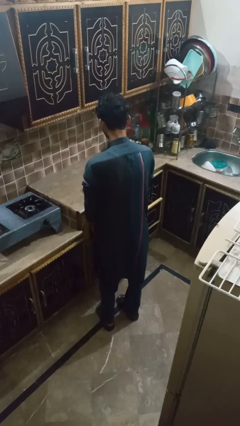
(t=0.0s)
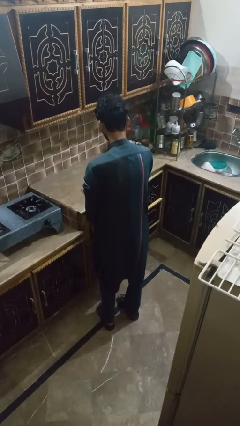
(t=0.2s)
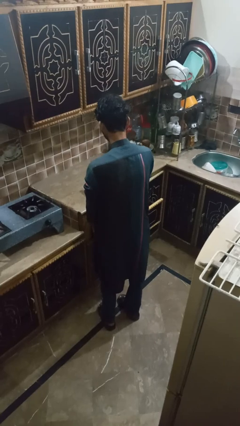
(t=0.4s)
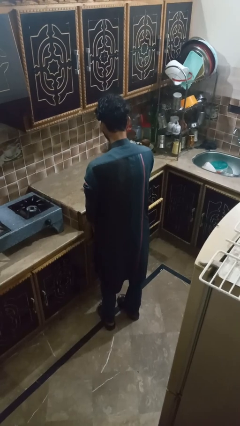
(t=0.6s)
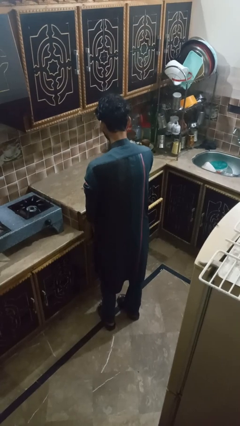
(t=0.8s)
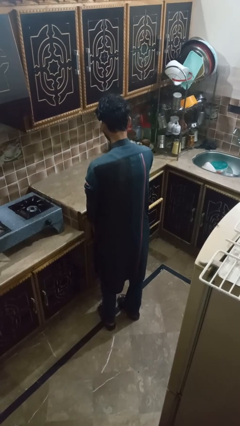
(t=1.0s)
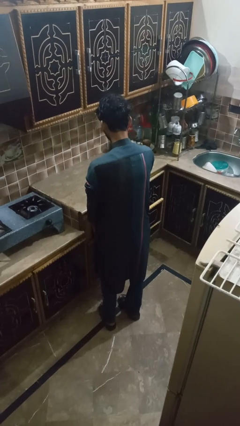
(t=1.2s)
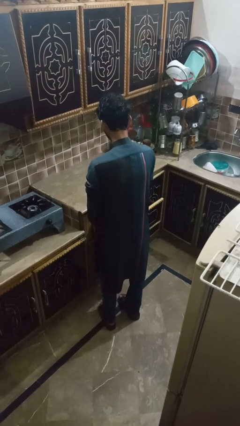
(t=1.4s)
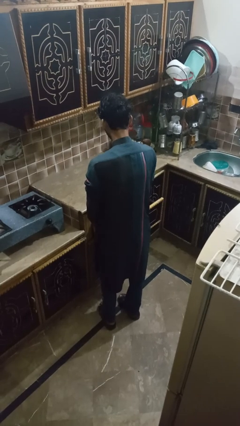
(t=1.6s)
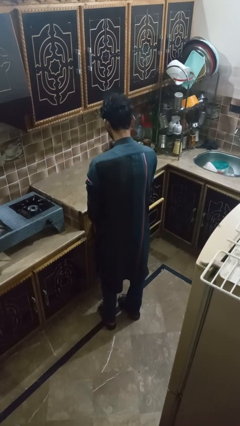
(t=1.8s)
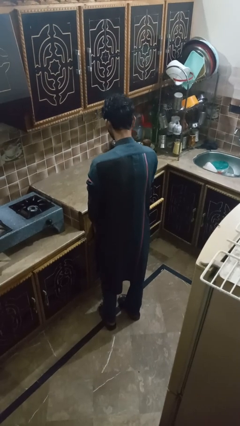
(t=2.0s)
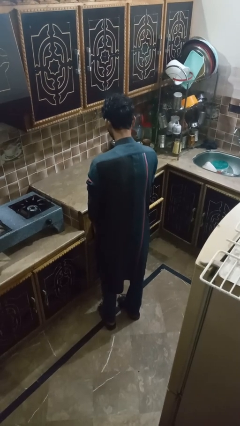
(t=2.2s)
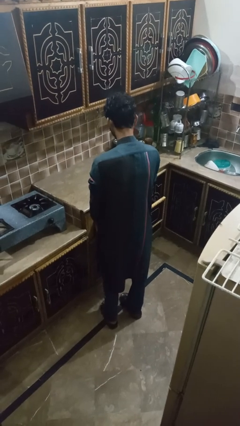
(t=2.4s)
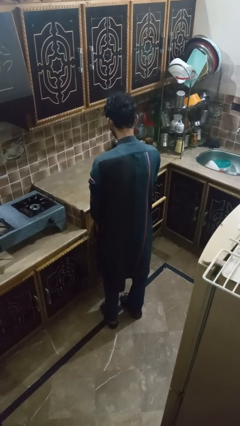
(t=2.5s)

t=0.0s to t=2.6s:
person puts object into kitchen drawer

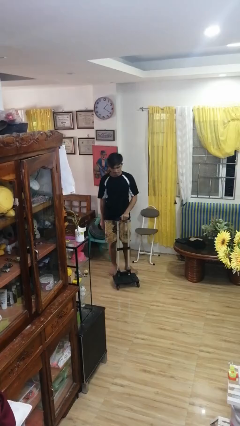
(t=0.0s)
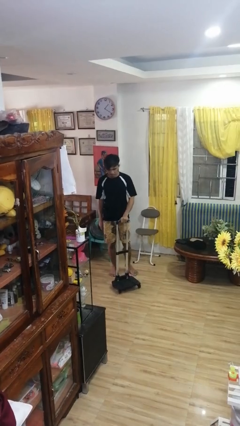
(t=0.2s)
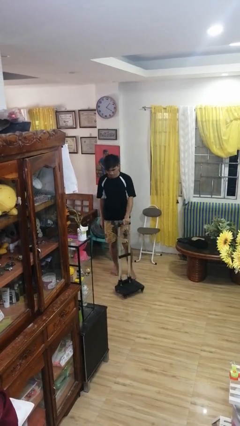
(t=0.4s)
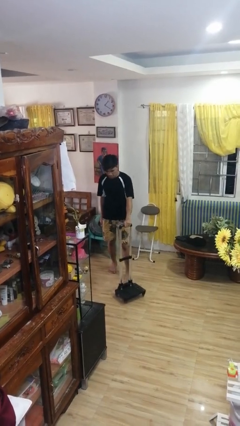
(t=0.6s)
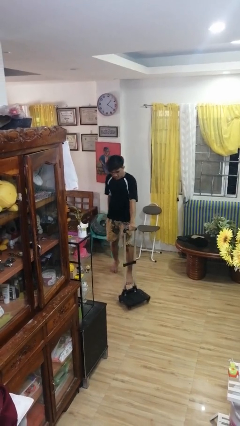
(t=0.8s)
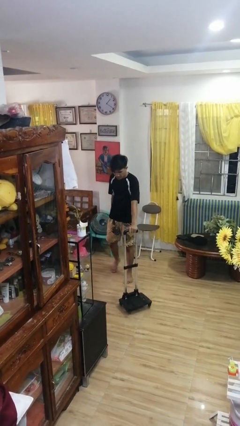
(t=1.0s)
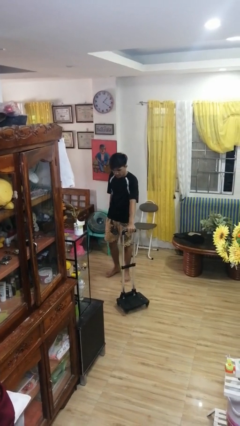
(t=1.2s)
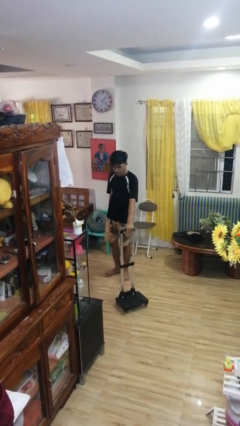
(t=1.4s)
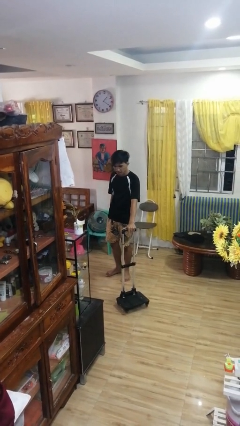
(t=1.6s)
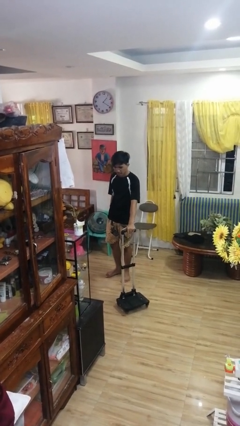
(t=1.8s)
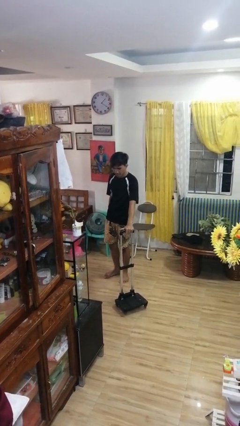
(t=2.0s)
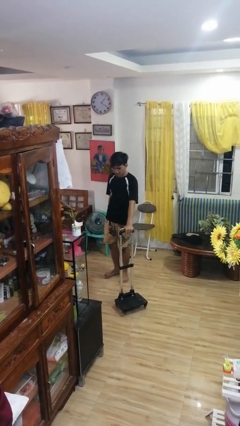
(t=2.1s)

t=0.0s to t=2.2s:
person pushes wheeled cart

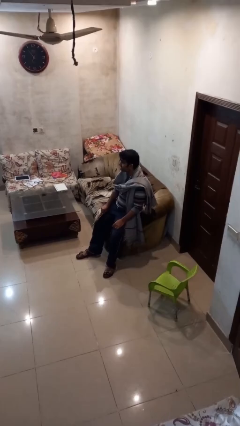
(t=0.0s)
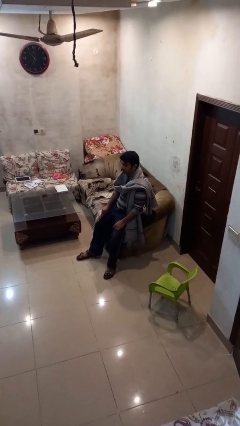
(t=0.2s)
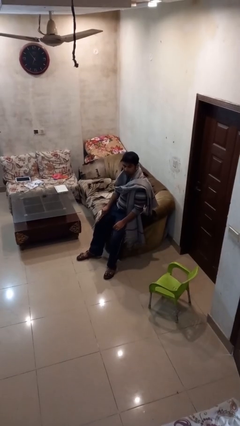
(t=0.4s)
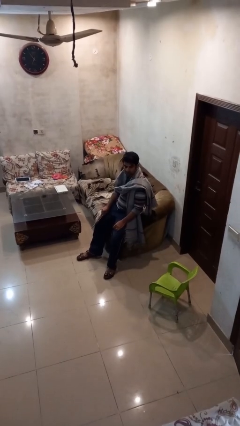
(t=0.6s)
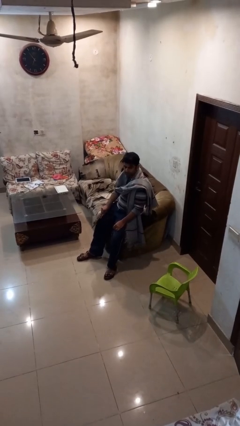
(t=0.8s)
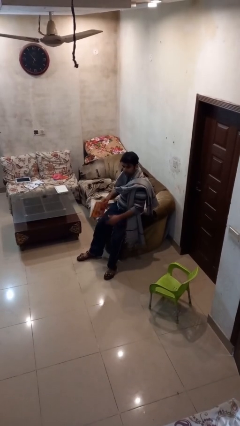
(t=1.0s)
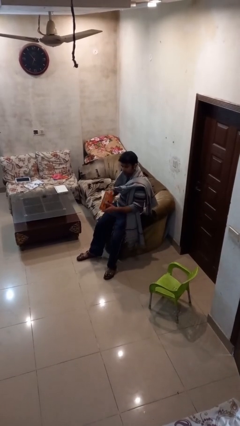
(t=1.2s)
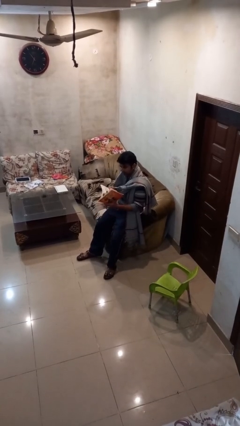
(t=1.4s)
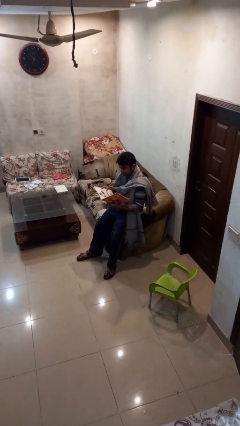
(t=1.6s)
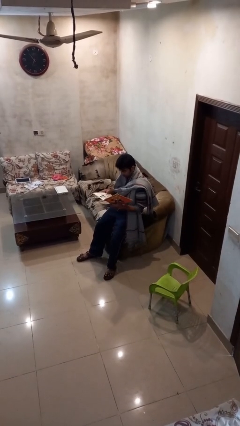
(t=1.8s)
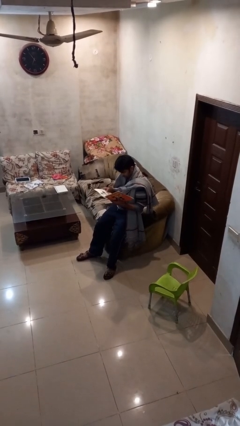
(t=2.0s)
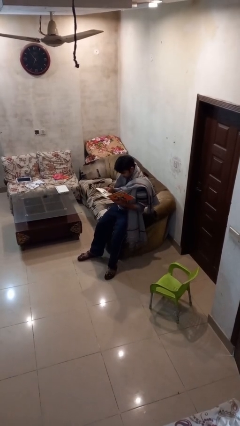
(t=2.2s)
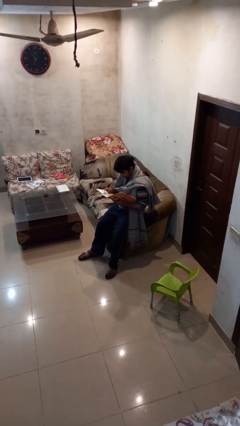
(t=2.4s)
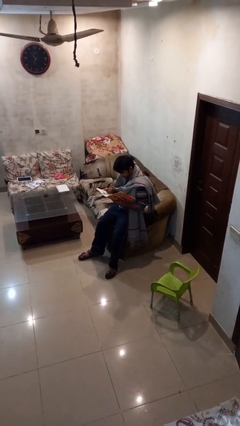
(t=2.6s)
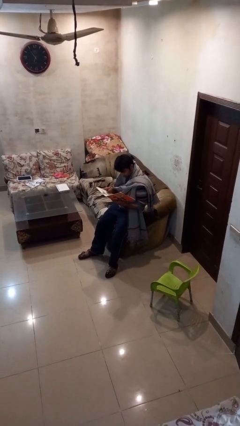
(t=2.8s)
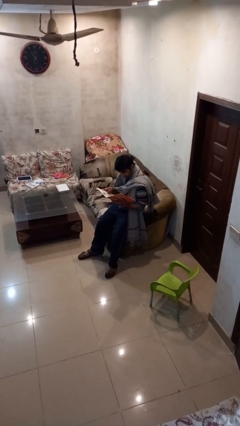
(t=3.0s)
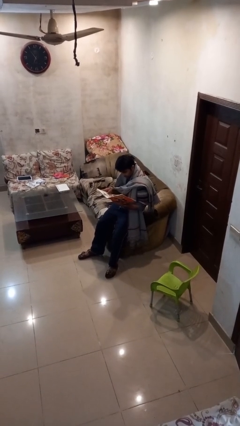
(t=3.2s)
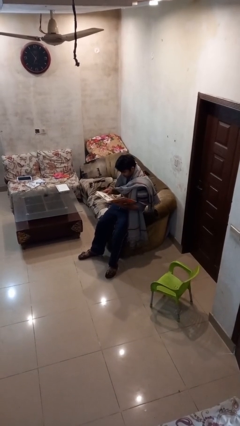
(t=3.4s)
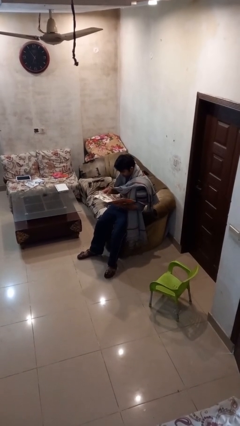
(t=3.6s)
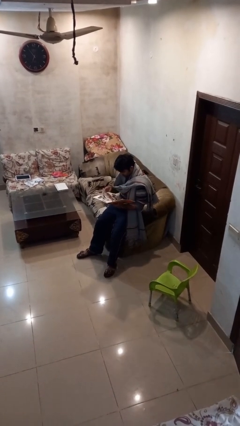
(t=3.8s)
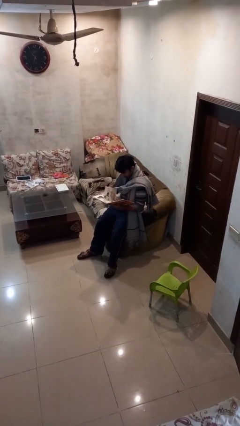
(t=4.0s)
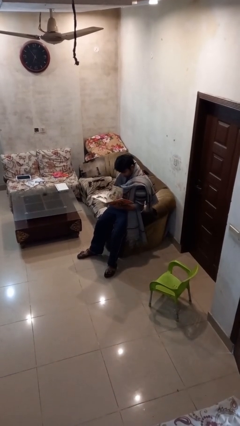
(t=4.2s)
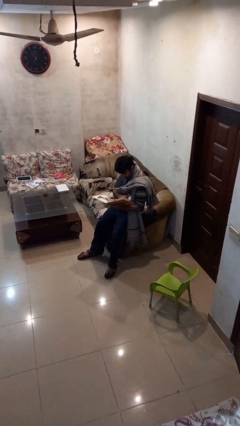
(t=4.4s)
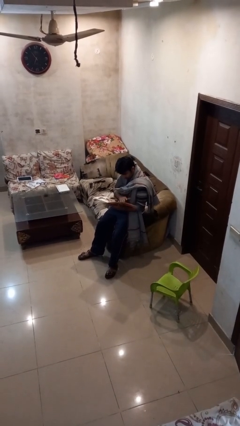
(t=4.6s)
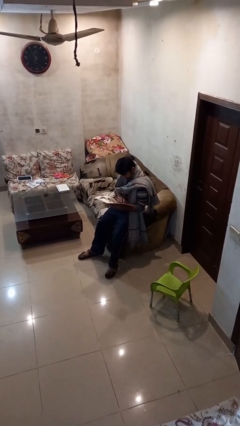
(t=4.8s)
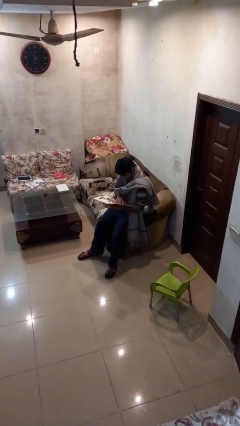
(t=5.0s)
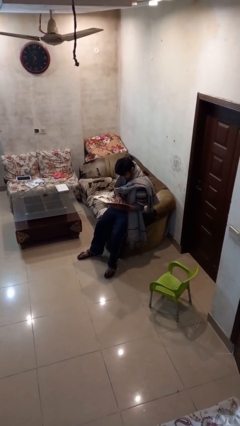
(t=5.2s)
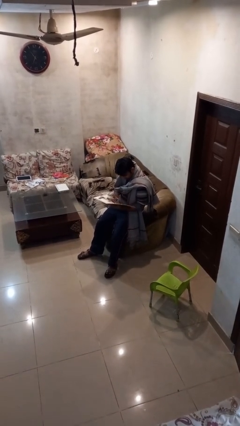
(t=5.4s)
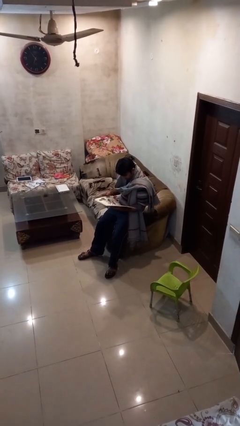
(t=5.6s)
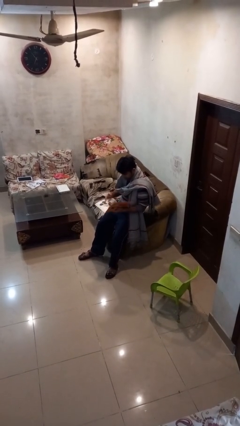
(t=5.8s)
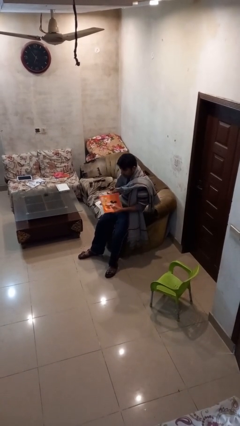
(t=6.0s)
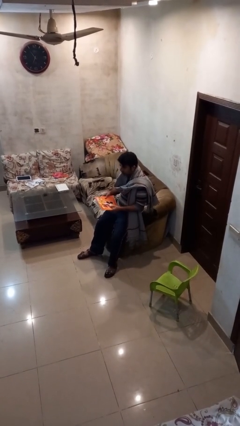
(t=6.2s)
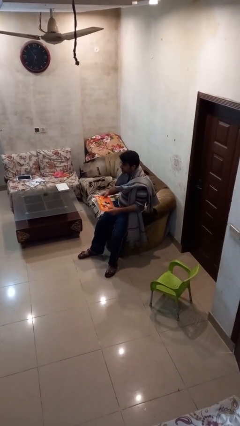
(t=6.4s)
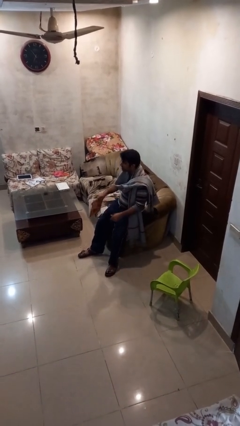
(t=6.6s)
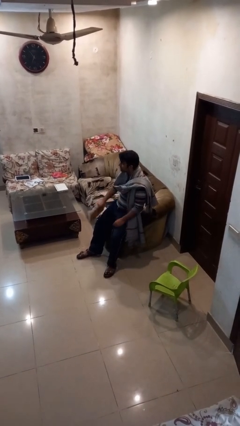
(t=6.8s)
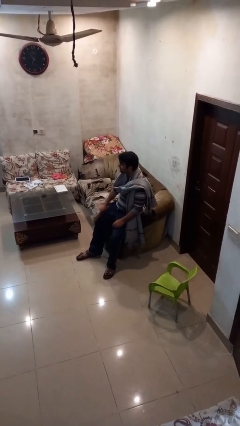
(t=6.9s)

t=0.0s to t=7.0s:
person reads document

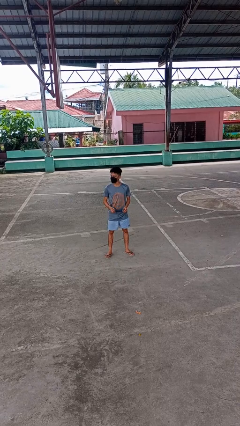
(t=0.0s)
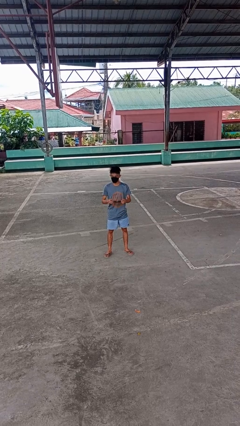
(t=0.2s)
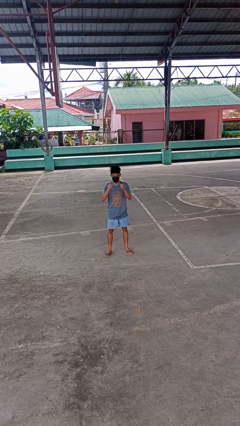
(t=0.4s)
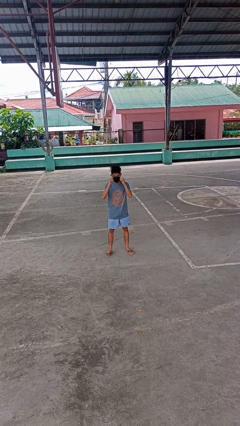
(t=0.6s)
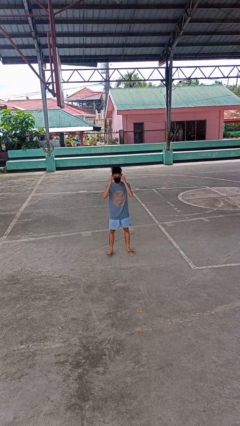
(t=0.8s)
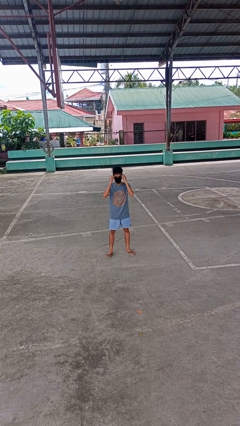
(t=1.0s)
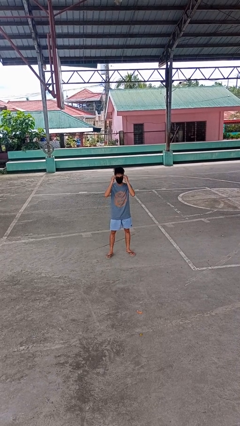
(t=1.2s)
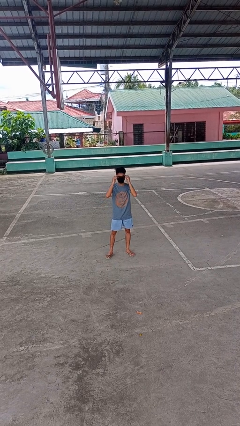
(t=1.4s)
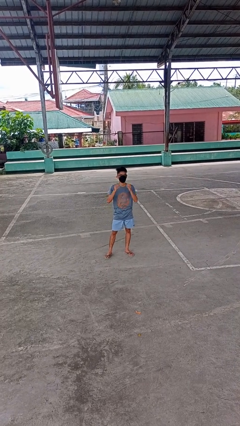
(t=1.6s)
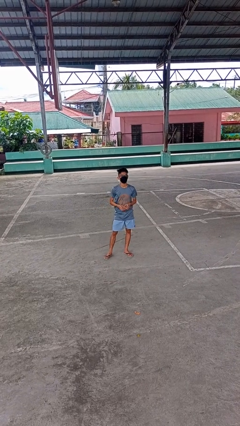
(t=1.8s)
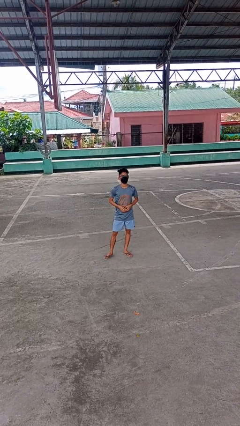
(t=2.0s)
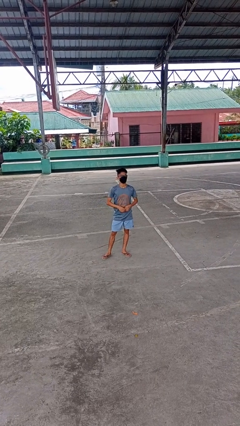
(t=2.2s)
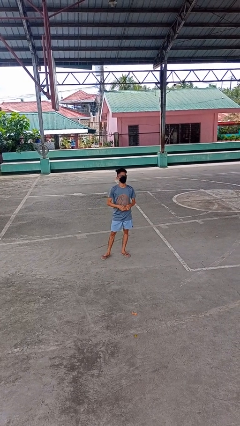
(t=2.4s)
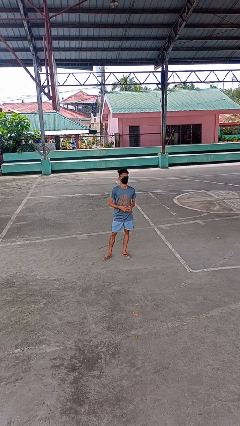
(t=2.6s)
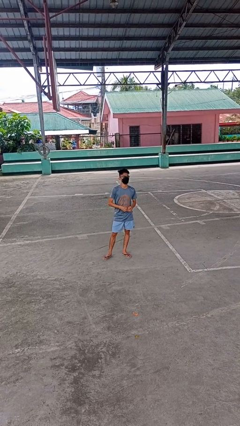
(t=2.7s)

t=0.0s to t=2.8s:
person puts on glasses

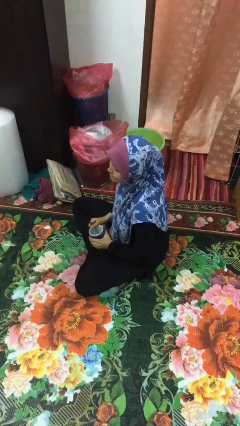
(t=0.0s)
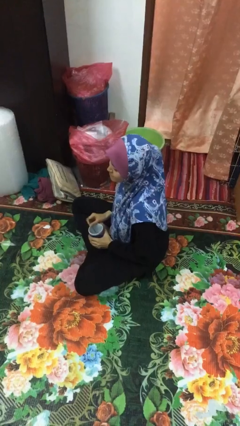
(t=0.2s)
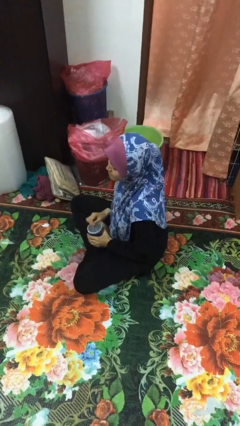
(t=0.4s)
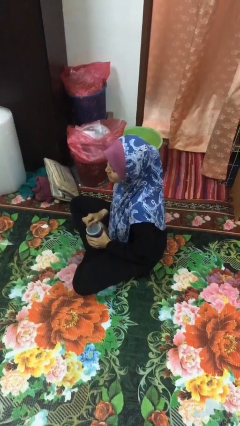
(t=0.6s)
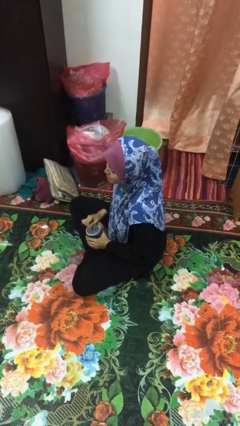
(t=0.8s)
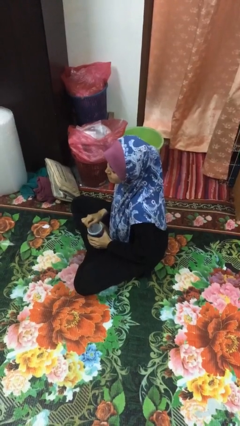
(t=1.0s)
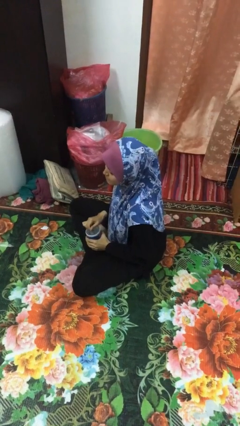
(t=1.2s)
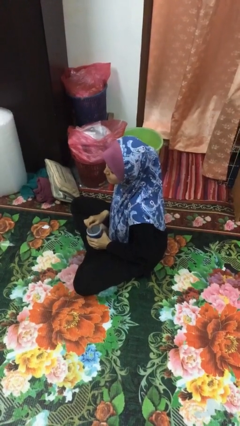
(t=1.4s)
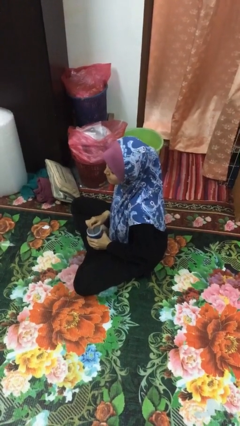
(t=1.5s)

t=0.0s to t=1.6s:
person stirs mug

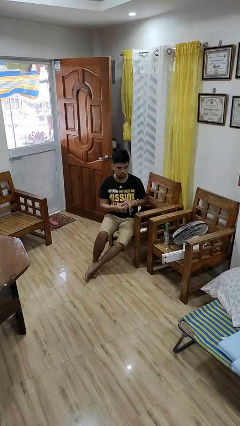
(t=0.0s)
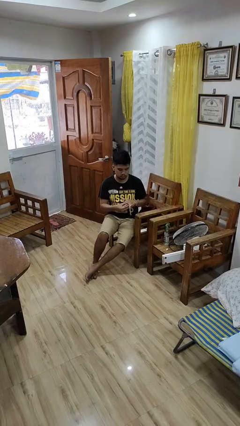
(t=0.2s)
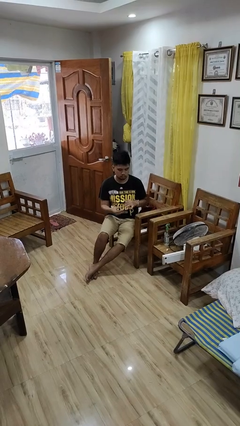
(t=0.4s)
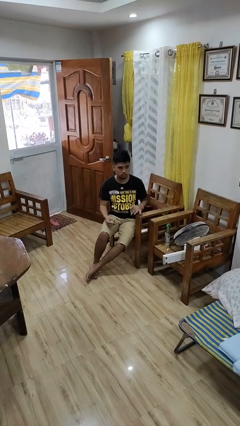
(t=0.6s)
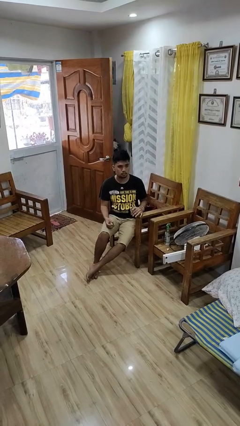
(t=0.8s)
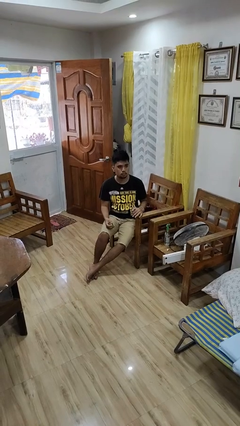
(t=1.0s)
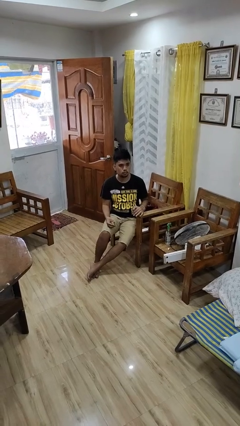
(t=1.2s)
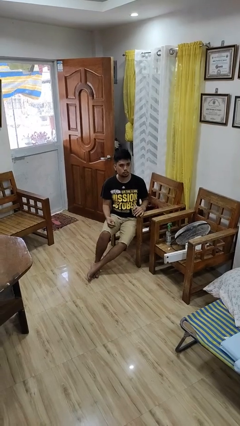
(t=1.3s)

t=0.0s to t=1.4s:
person takes off ring
